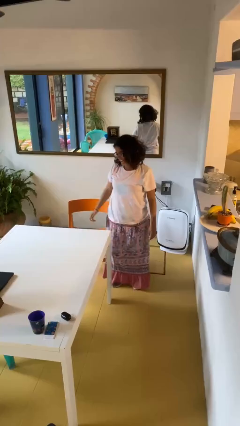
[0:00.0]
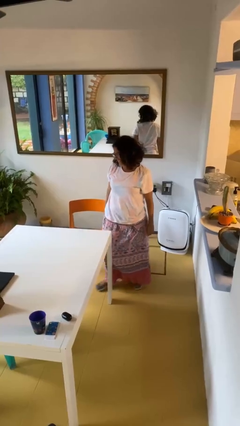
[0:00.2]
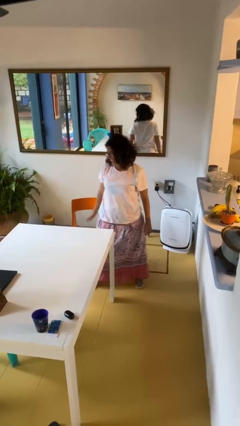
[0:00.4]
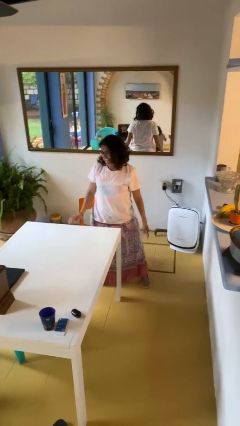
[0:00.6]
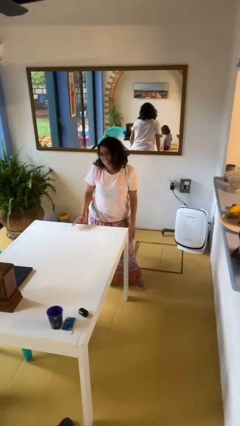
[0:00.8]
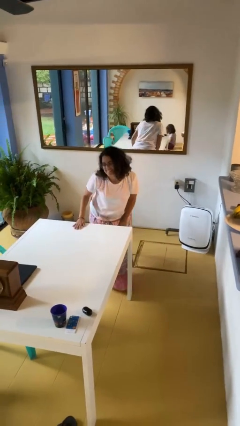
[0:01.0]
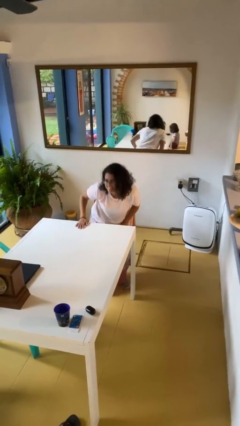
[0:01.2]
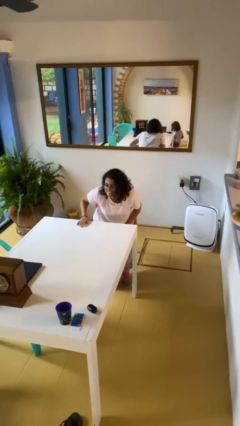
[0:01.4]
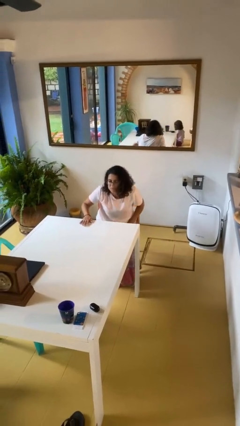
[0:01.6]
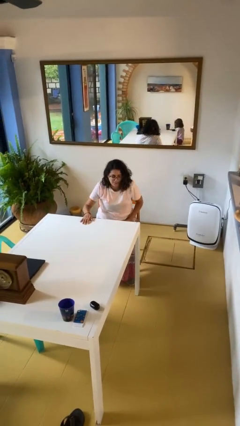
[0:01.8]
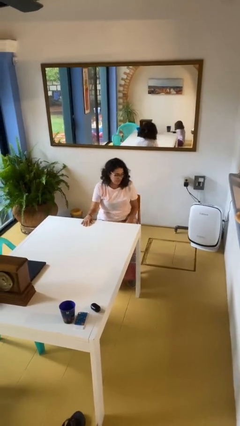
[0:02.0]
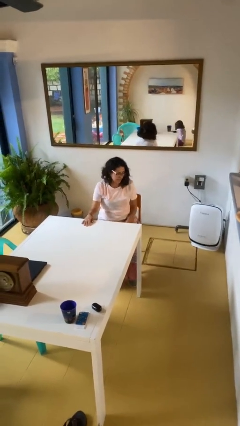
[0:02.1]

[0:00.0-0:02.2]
person sits down

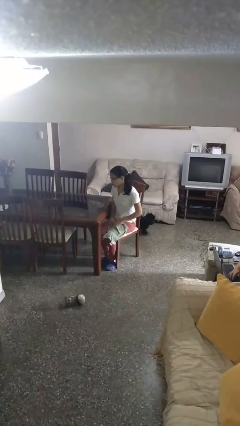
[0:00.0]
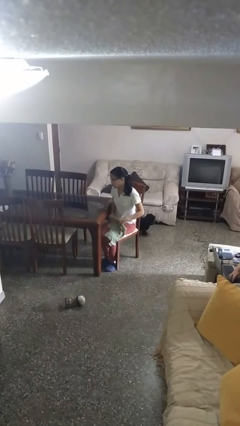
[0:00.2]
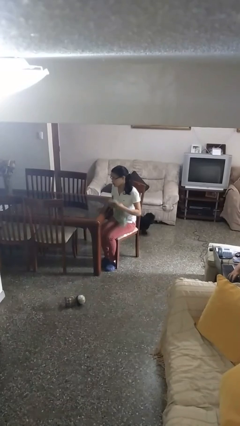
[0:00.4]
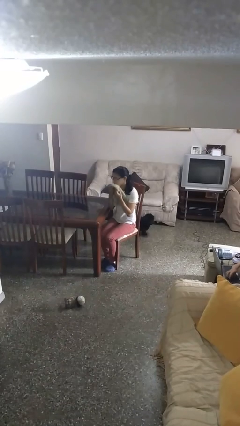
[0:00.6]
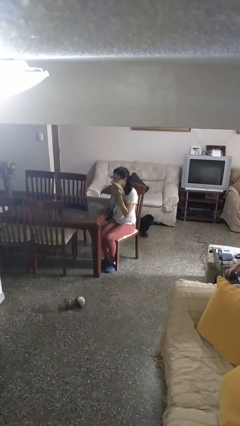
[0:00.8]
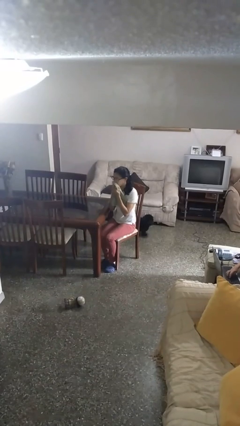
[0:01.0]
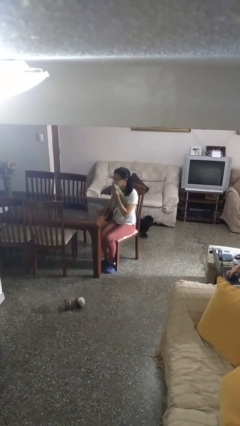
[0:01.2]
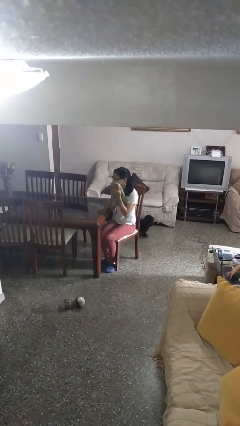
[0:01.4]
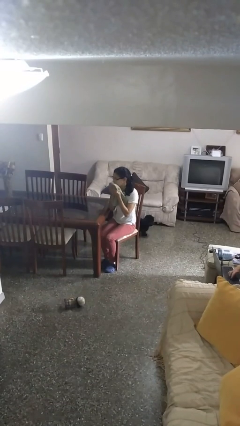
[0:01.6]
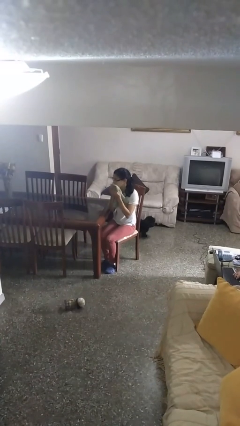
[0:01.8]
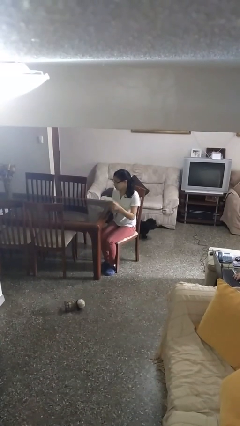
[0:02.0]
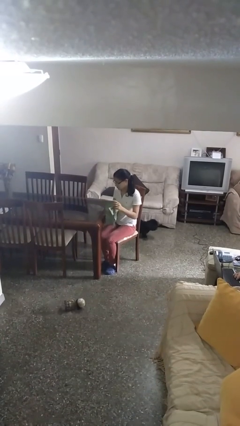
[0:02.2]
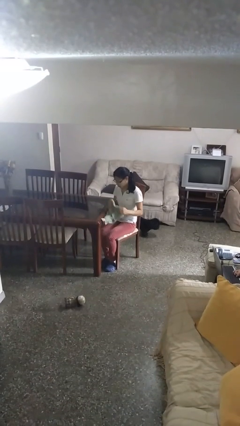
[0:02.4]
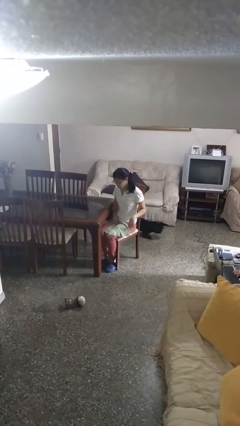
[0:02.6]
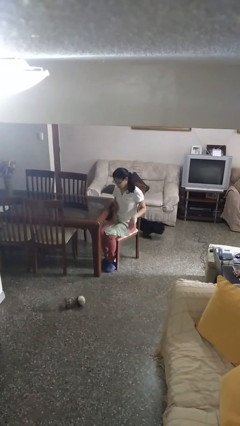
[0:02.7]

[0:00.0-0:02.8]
person wipes mouth with napkin

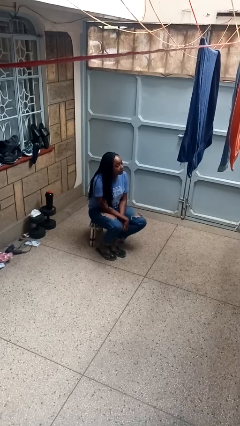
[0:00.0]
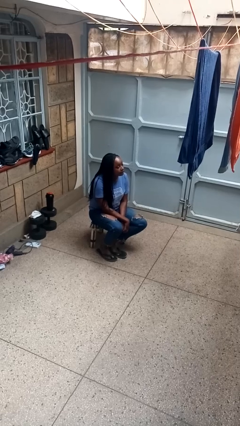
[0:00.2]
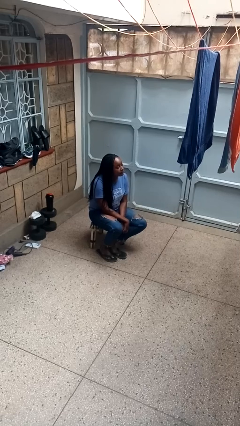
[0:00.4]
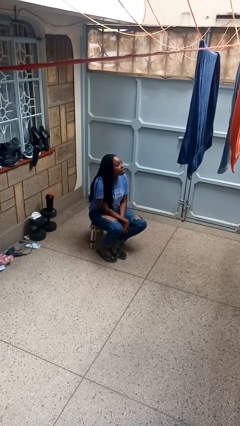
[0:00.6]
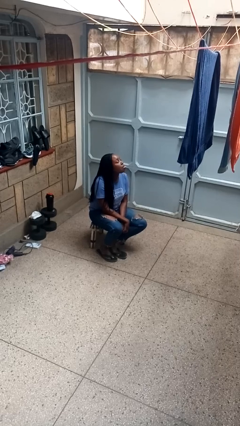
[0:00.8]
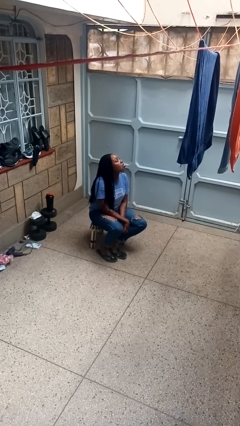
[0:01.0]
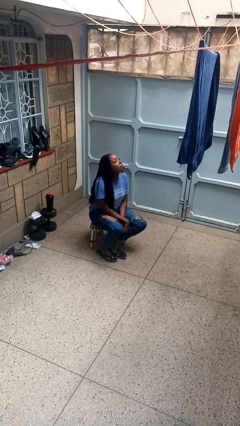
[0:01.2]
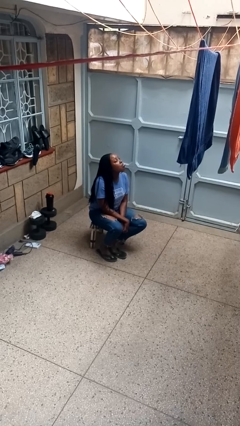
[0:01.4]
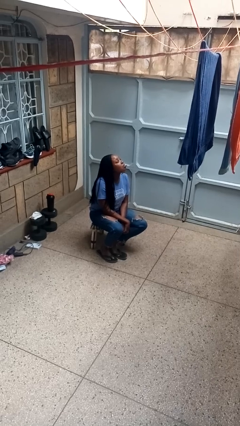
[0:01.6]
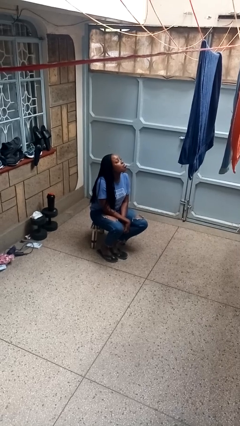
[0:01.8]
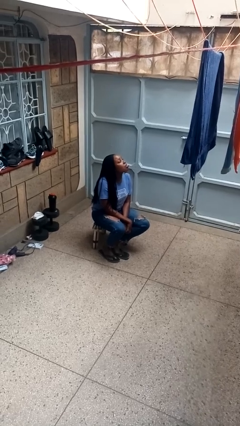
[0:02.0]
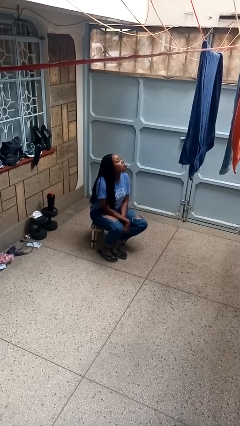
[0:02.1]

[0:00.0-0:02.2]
person sticks out tongue

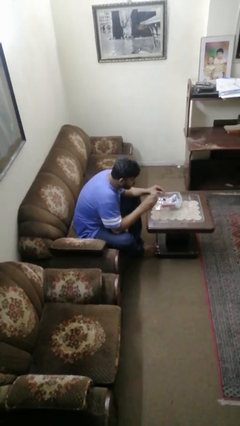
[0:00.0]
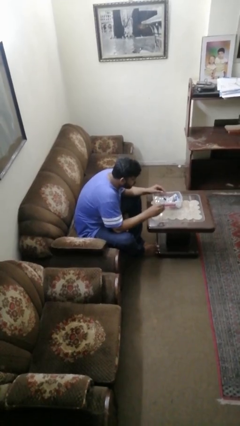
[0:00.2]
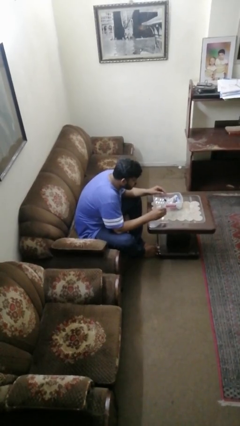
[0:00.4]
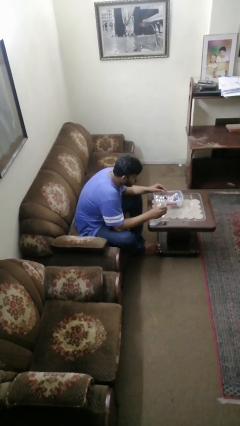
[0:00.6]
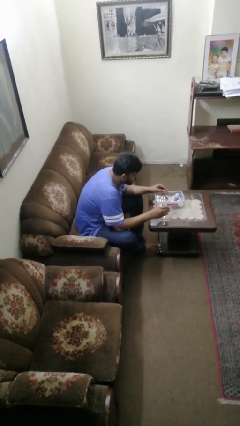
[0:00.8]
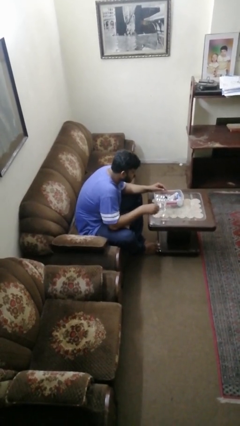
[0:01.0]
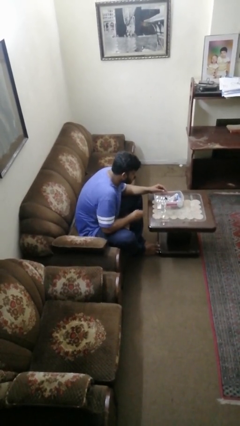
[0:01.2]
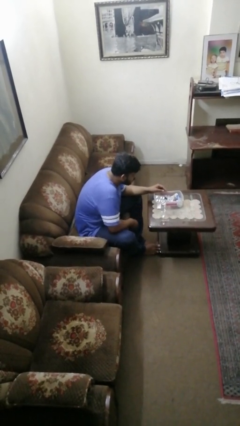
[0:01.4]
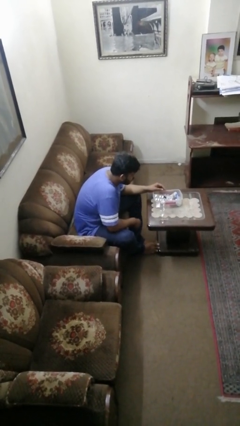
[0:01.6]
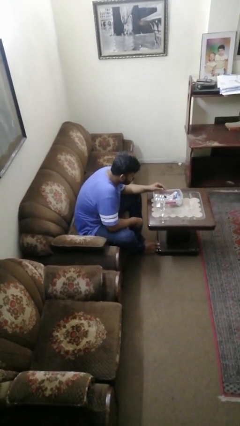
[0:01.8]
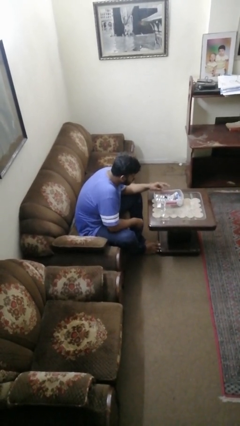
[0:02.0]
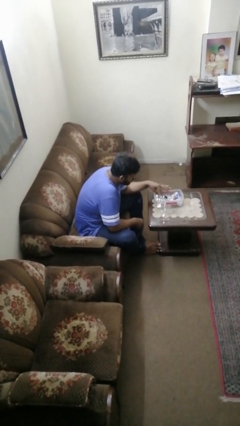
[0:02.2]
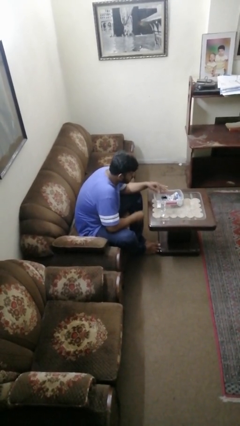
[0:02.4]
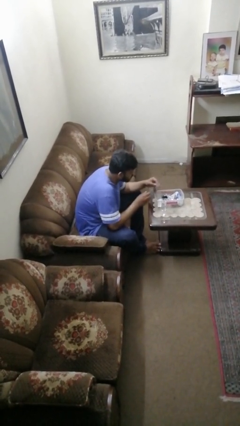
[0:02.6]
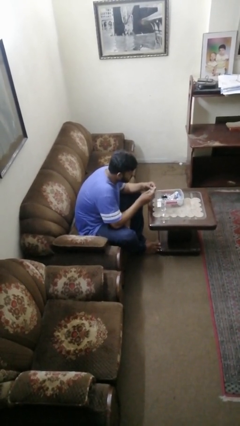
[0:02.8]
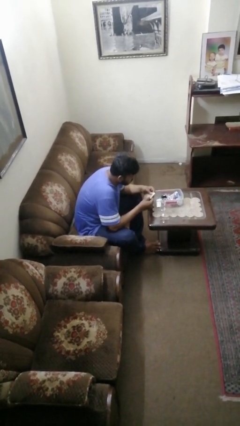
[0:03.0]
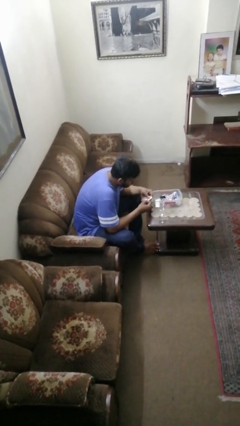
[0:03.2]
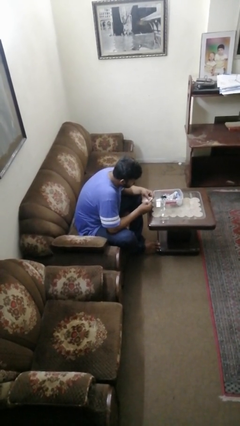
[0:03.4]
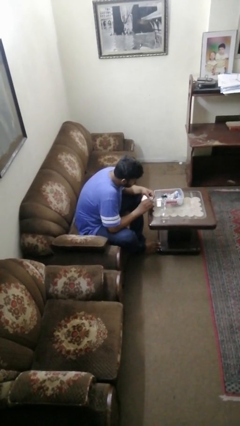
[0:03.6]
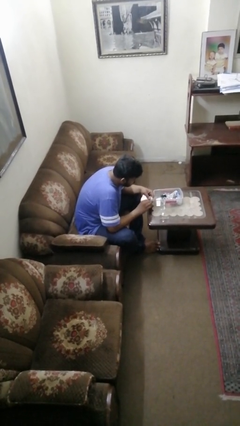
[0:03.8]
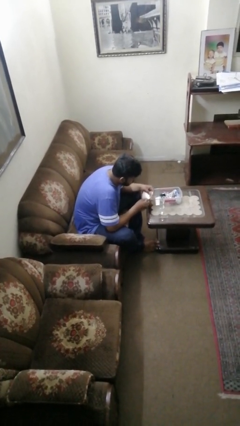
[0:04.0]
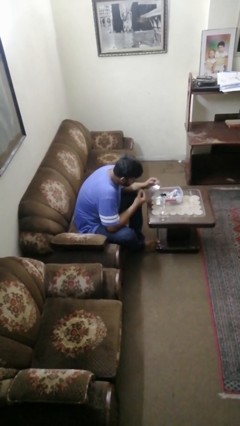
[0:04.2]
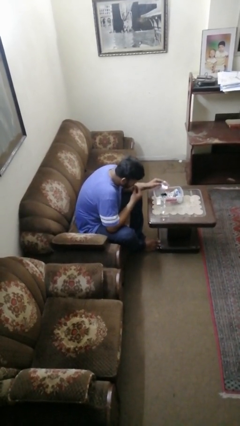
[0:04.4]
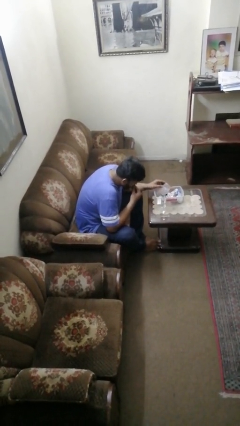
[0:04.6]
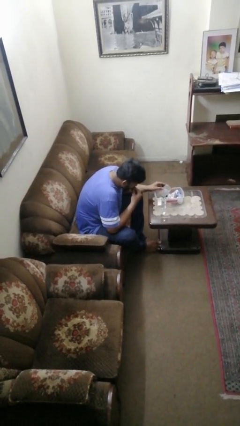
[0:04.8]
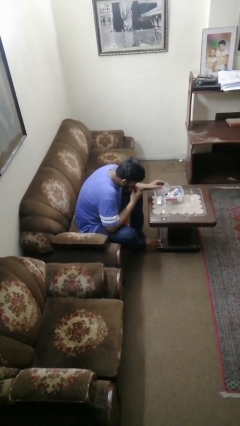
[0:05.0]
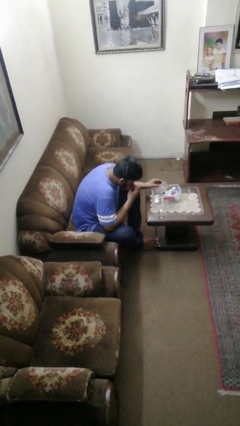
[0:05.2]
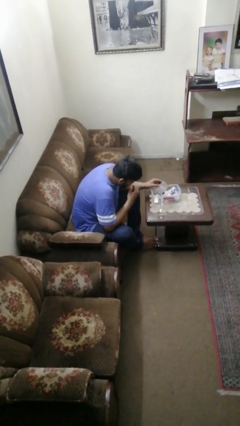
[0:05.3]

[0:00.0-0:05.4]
person takes medicine pills

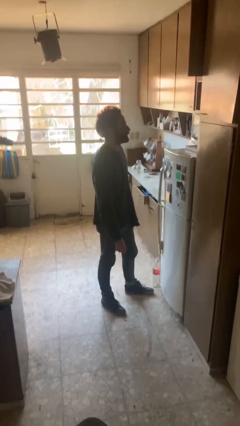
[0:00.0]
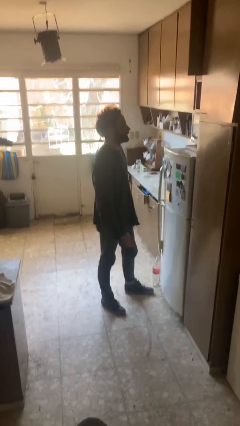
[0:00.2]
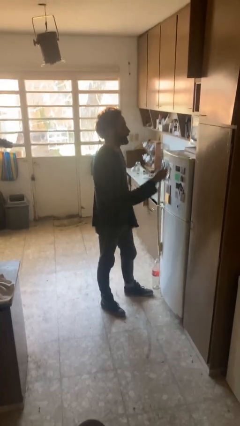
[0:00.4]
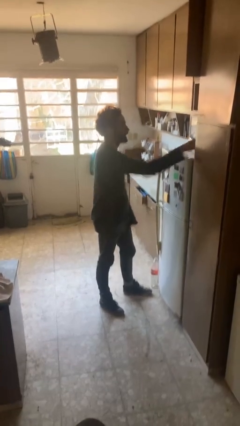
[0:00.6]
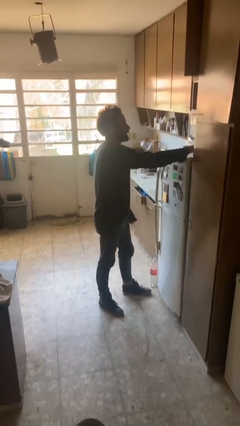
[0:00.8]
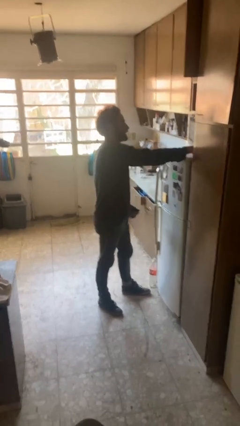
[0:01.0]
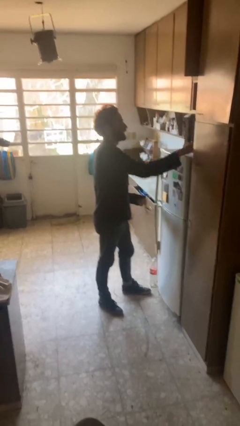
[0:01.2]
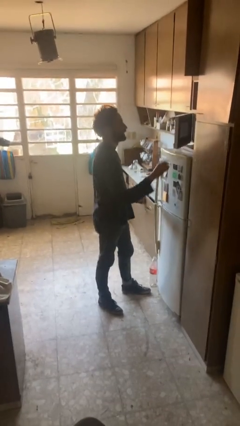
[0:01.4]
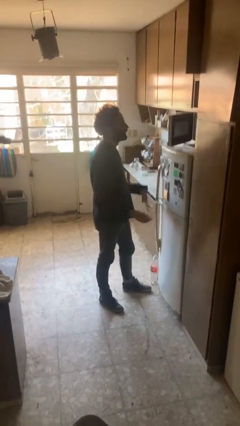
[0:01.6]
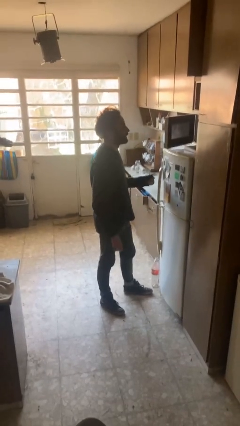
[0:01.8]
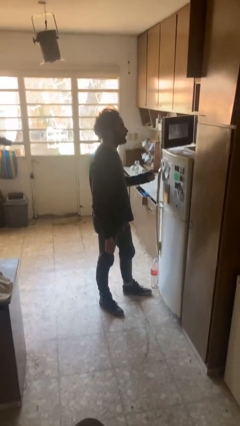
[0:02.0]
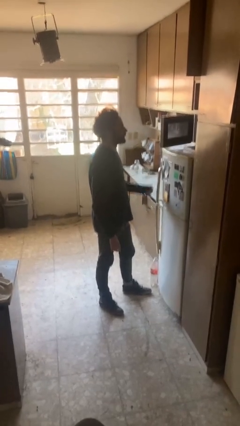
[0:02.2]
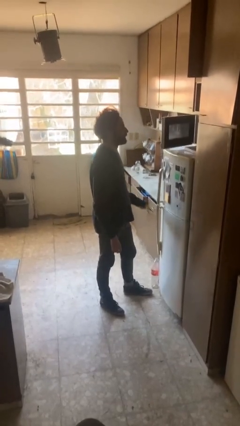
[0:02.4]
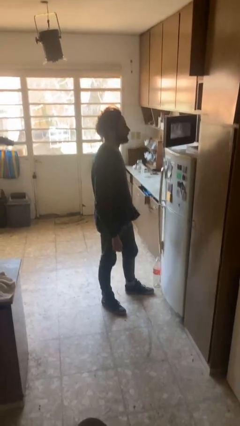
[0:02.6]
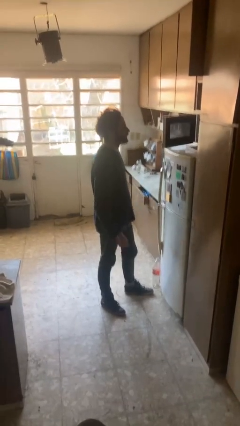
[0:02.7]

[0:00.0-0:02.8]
person opens microwave

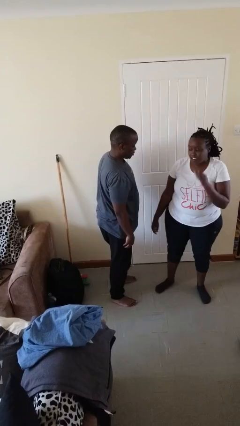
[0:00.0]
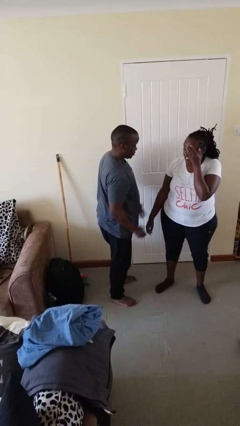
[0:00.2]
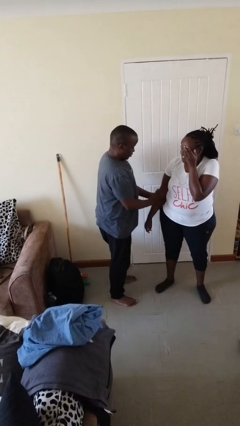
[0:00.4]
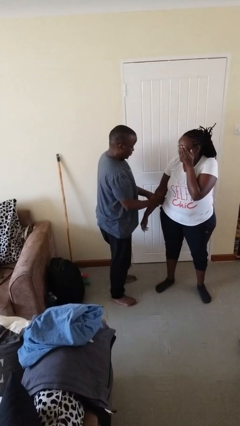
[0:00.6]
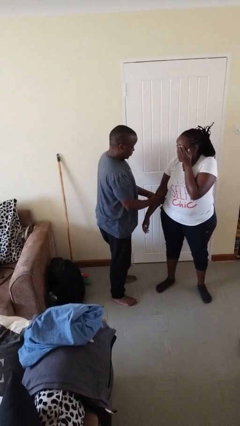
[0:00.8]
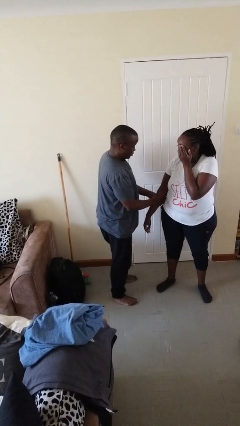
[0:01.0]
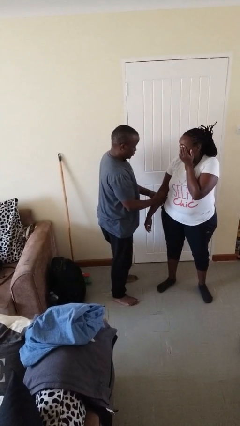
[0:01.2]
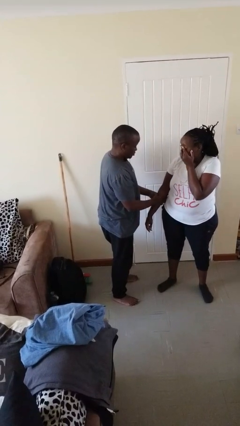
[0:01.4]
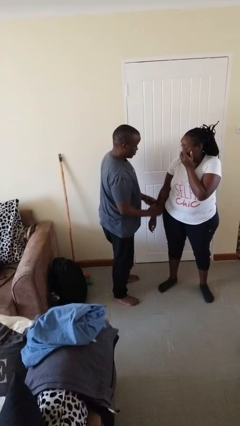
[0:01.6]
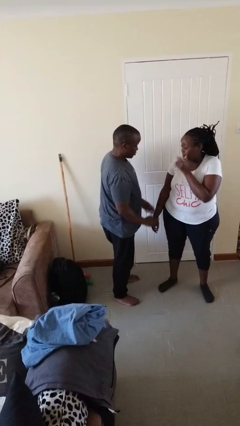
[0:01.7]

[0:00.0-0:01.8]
person grabs person by forearm
